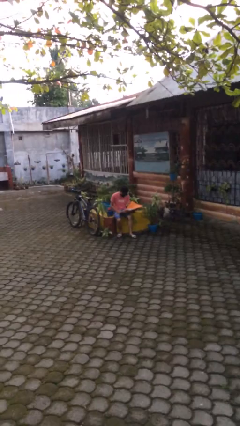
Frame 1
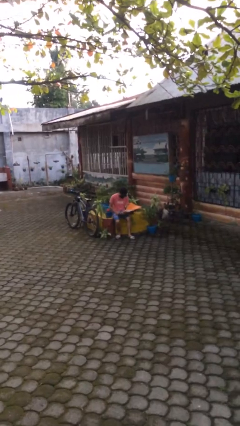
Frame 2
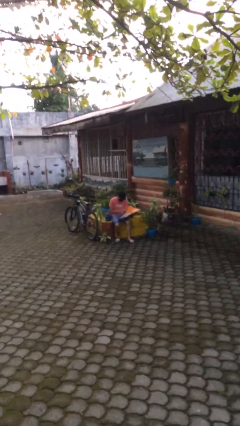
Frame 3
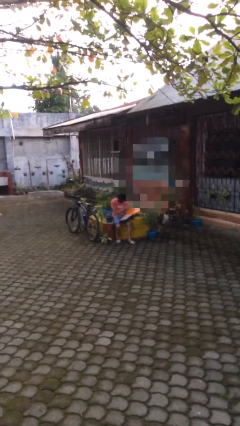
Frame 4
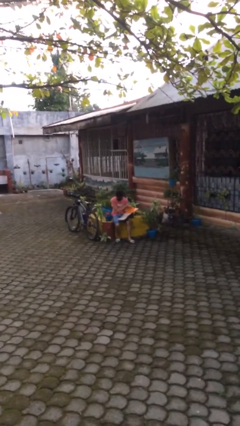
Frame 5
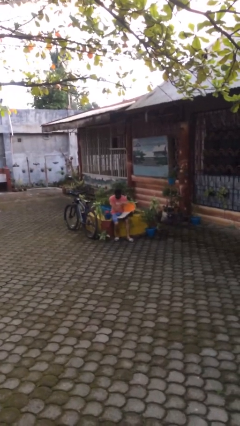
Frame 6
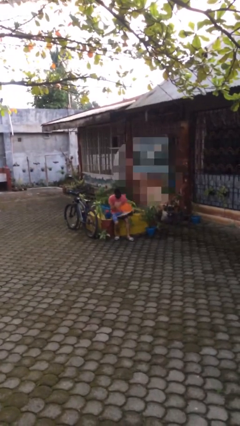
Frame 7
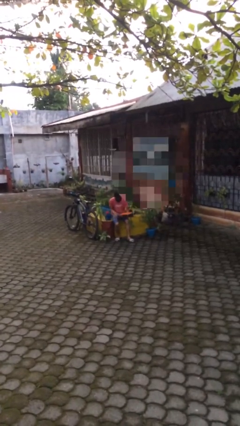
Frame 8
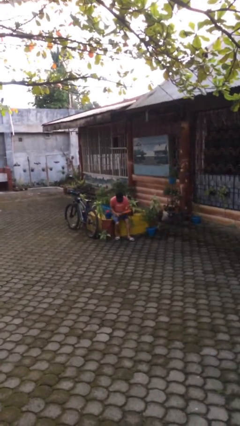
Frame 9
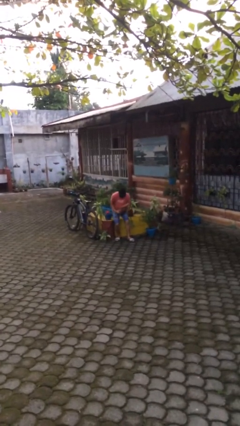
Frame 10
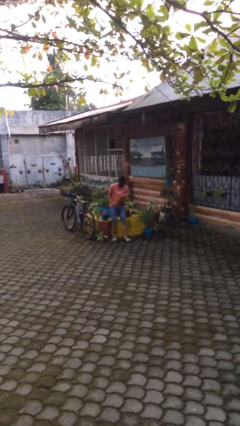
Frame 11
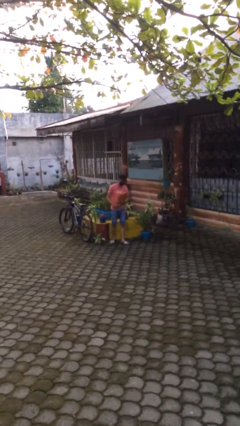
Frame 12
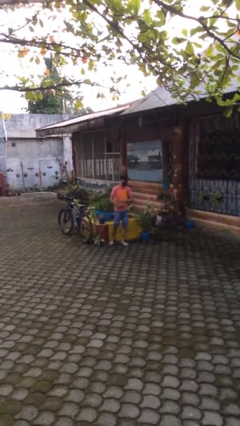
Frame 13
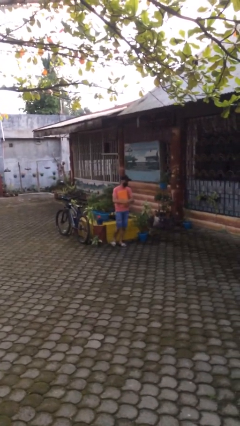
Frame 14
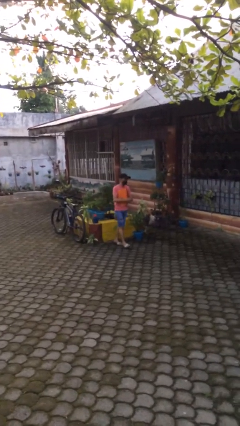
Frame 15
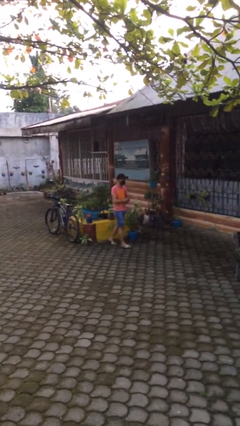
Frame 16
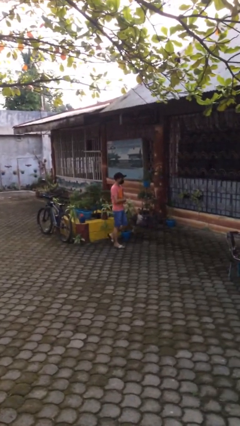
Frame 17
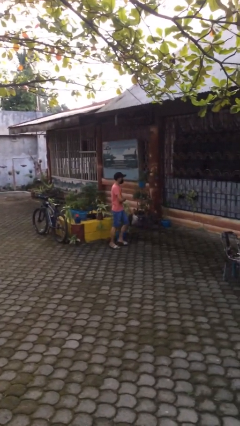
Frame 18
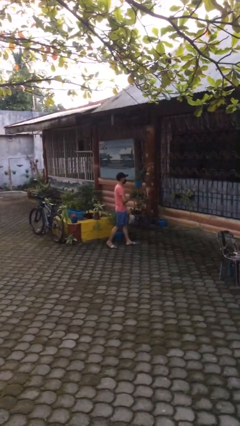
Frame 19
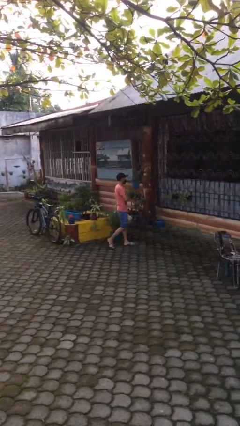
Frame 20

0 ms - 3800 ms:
person stands up

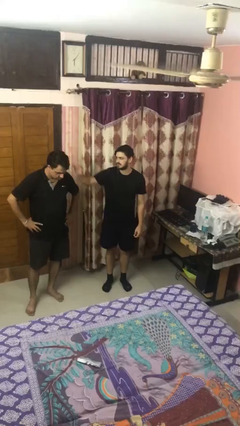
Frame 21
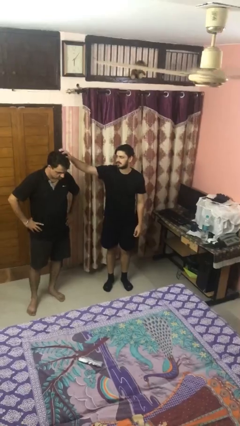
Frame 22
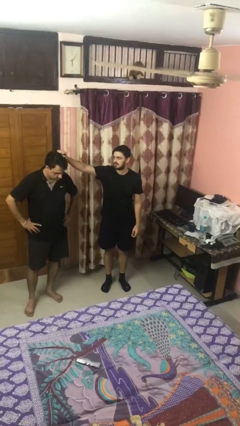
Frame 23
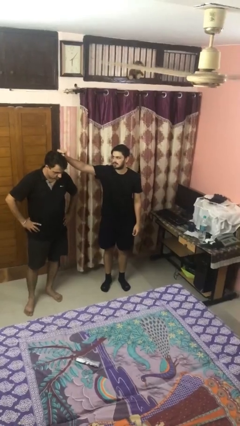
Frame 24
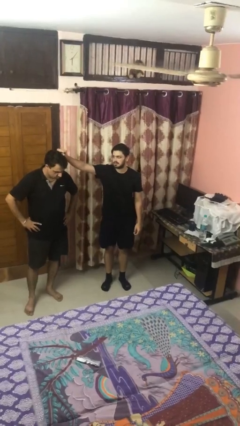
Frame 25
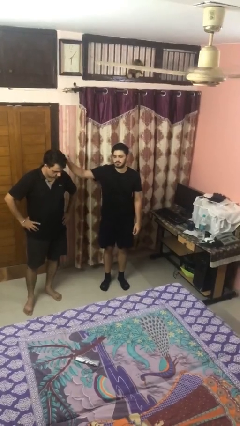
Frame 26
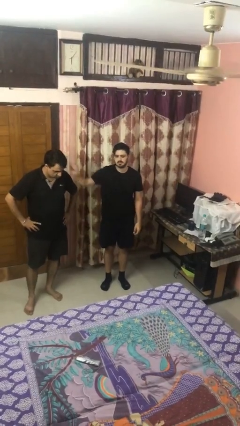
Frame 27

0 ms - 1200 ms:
person grabs person by hair

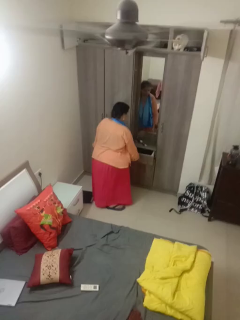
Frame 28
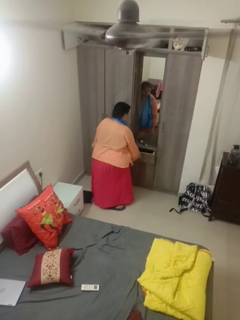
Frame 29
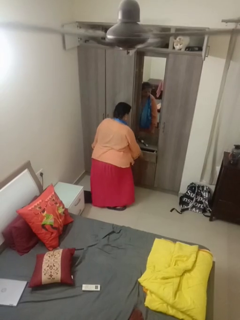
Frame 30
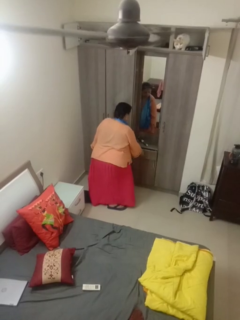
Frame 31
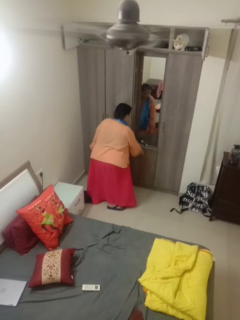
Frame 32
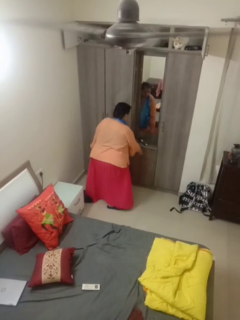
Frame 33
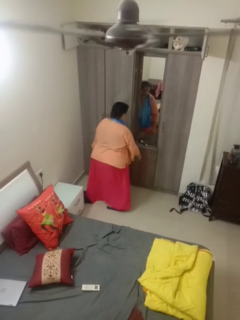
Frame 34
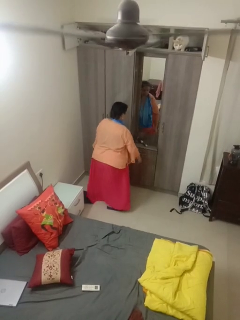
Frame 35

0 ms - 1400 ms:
person closes dresser drawer

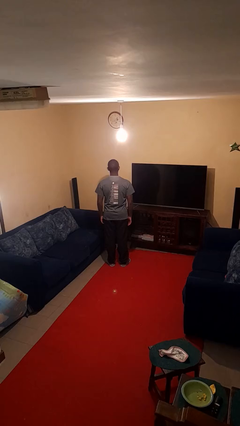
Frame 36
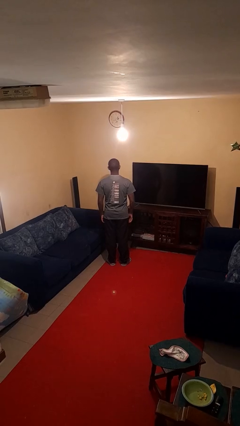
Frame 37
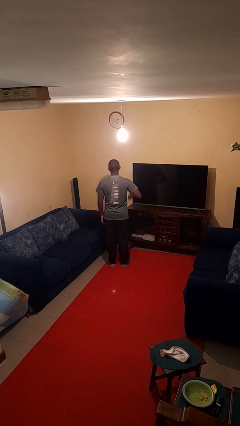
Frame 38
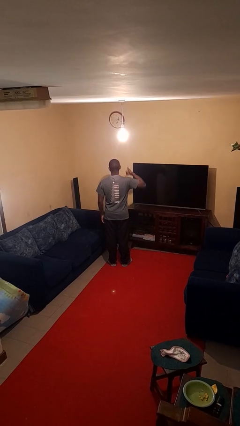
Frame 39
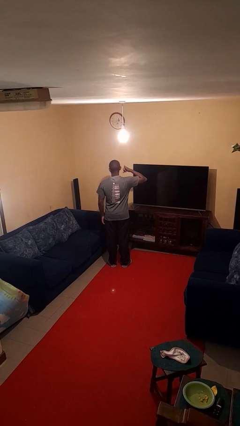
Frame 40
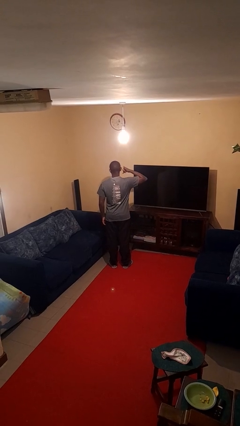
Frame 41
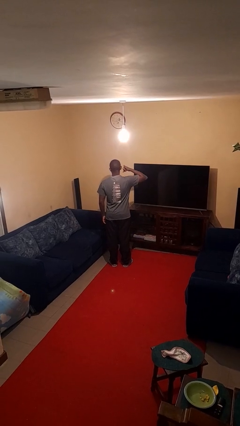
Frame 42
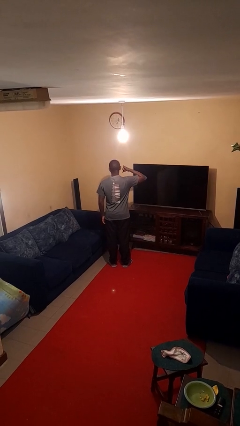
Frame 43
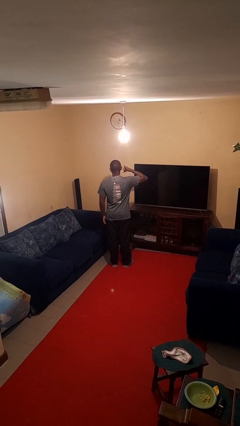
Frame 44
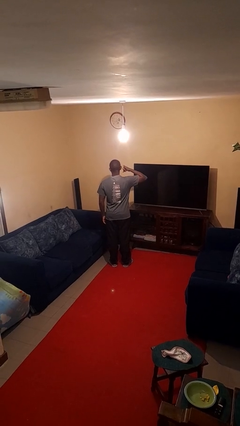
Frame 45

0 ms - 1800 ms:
person gestures call me

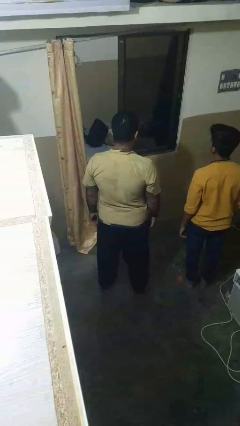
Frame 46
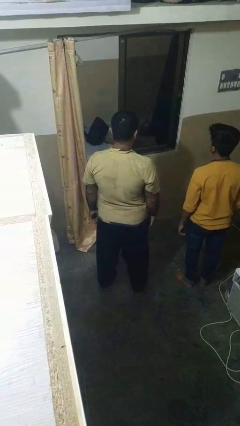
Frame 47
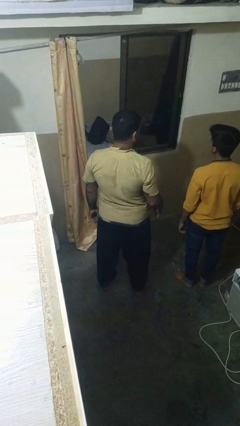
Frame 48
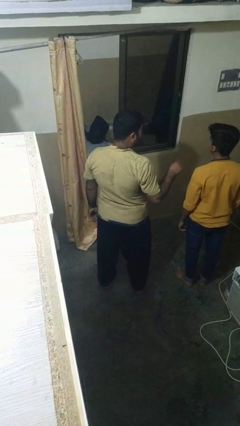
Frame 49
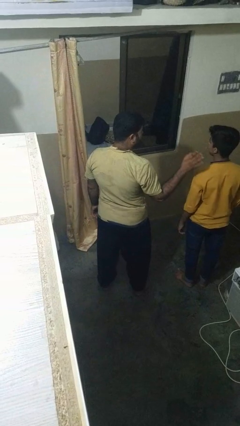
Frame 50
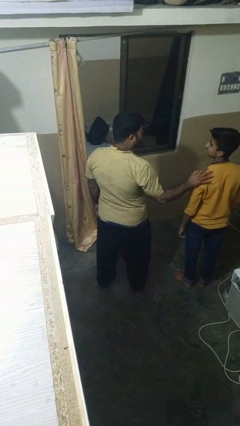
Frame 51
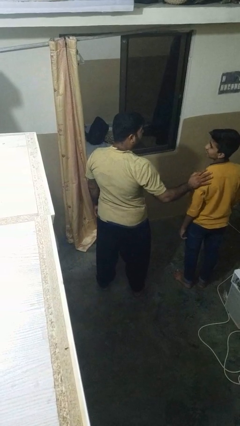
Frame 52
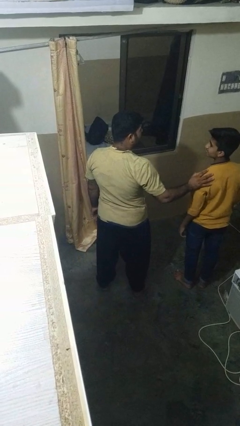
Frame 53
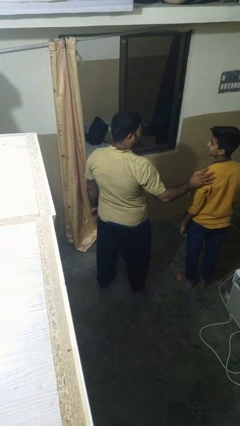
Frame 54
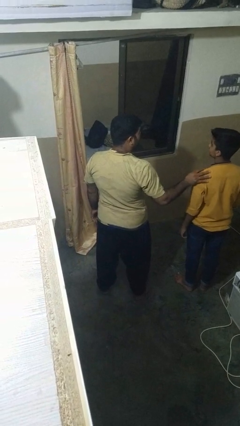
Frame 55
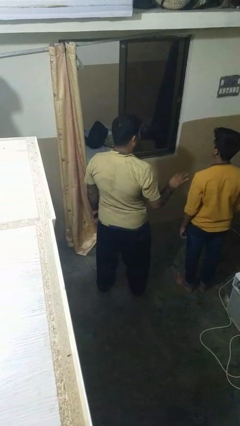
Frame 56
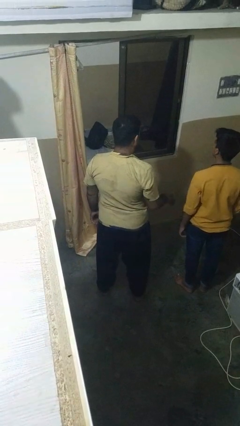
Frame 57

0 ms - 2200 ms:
person pounds shoulders of person

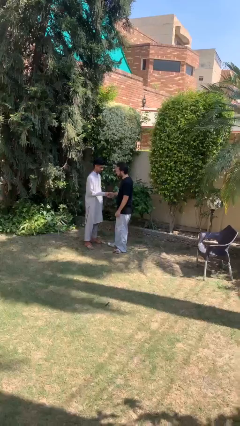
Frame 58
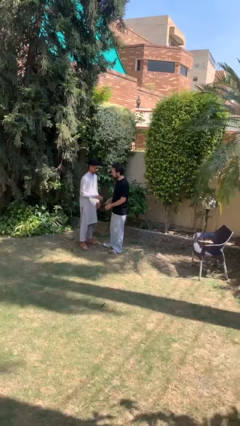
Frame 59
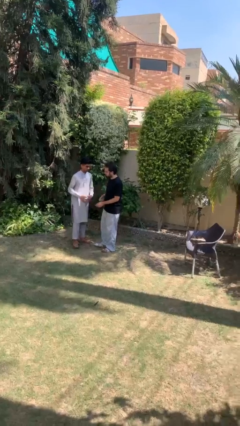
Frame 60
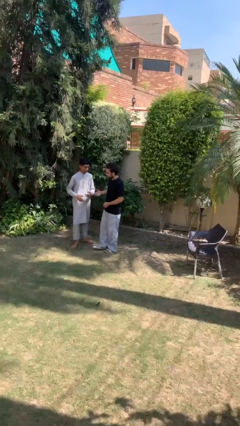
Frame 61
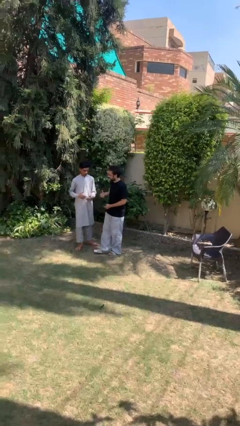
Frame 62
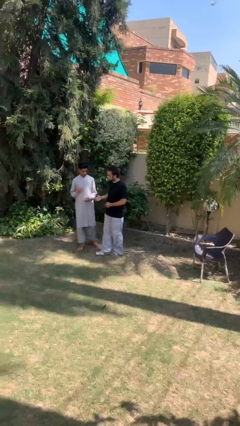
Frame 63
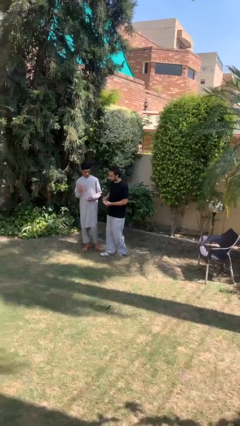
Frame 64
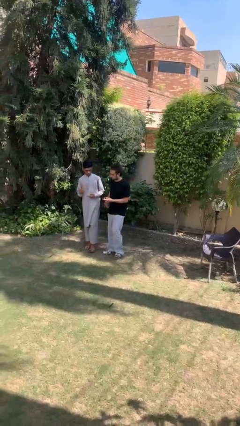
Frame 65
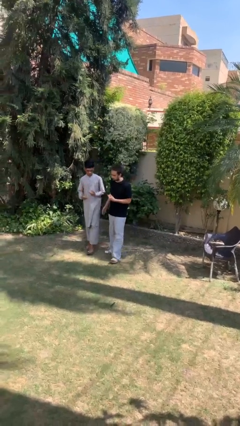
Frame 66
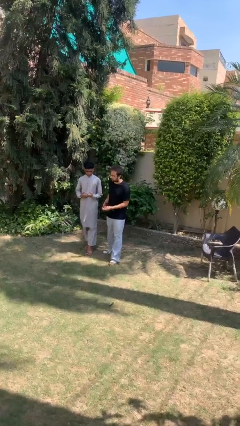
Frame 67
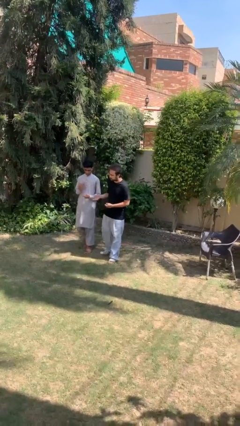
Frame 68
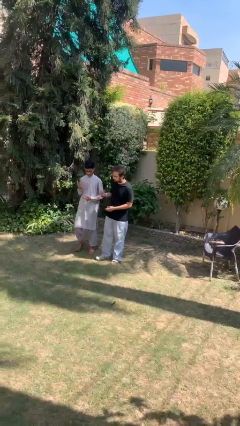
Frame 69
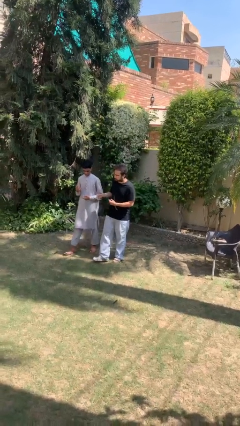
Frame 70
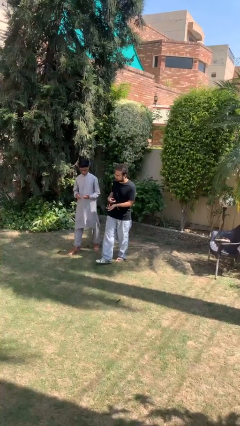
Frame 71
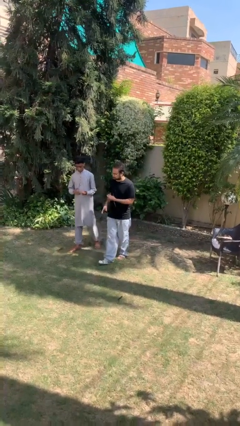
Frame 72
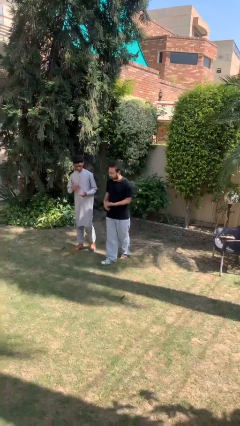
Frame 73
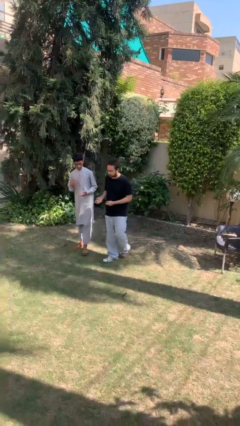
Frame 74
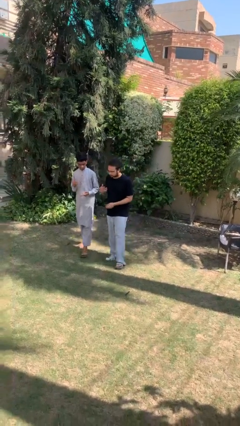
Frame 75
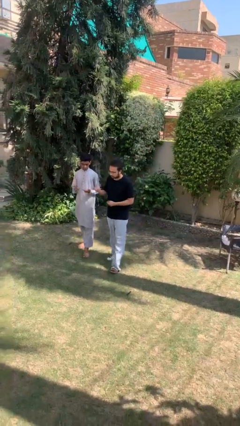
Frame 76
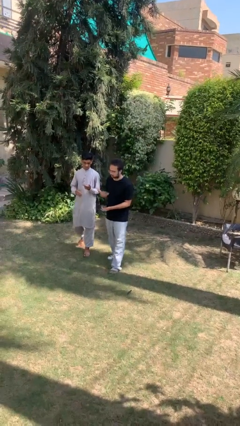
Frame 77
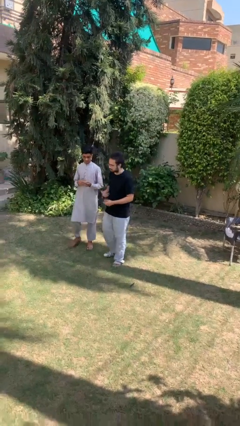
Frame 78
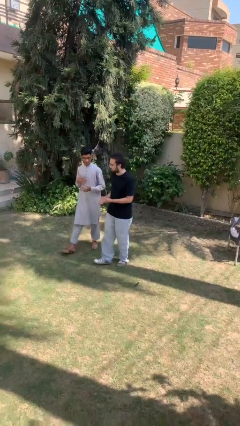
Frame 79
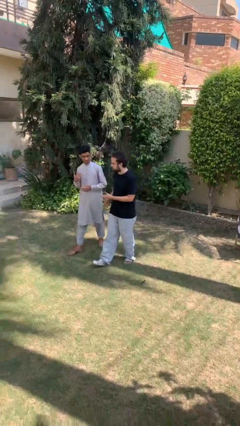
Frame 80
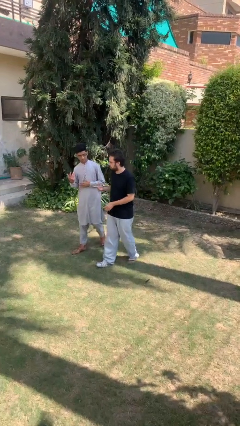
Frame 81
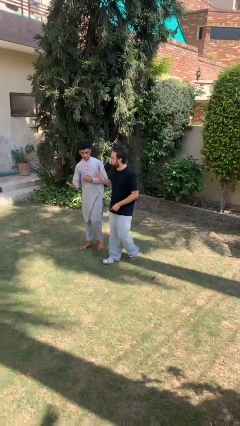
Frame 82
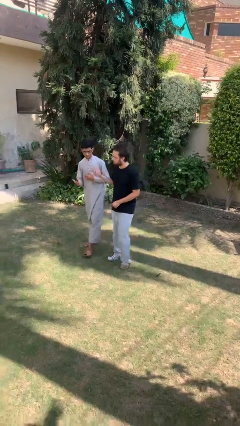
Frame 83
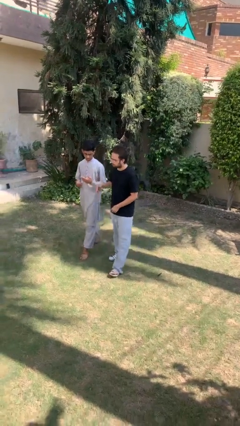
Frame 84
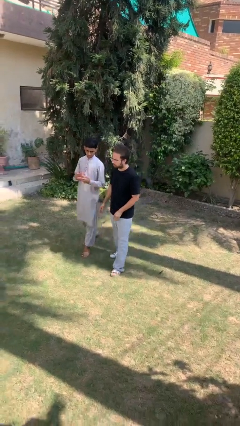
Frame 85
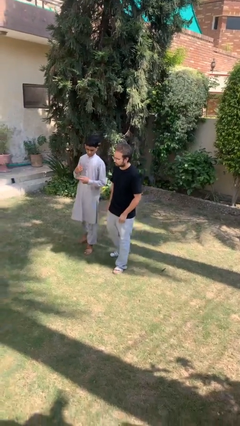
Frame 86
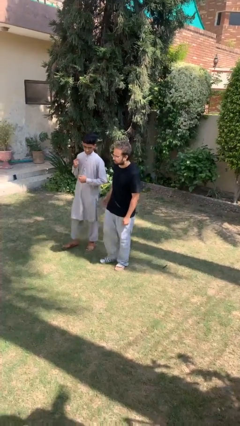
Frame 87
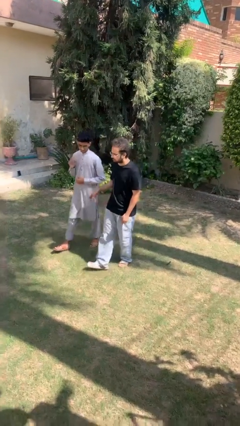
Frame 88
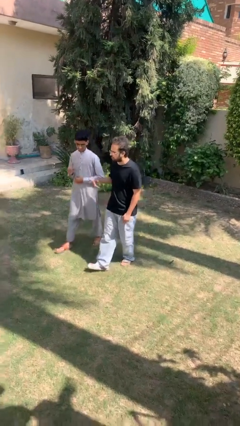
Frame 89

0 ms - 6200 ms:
person talks to person

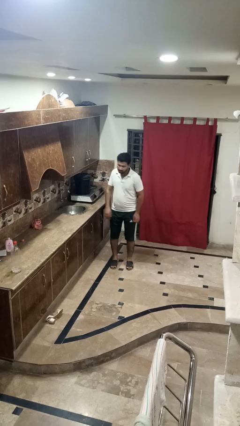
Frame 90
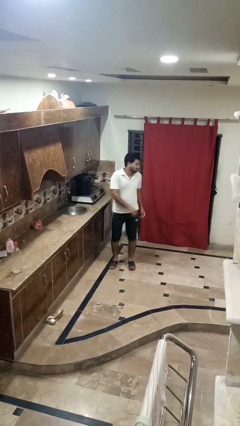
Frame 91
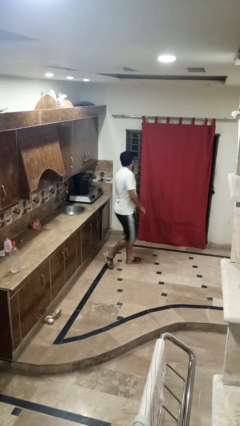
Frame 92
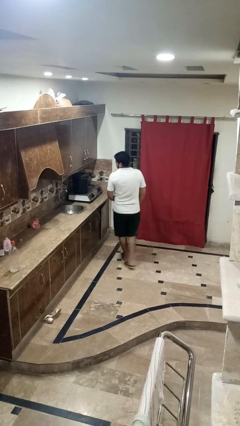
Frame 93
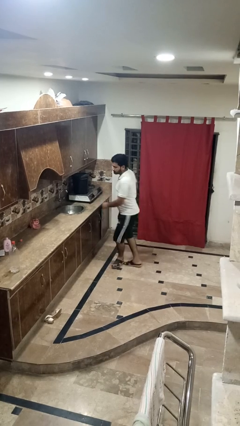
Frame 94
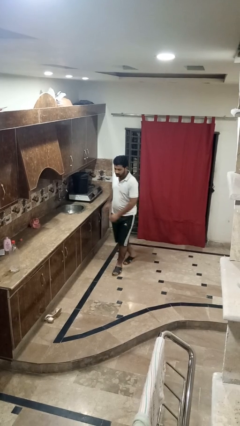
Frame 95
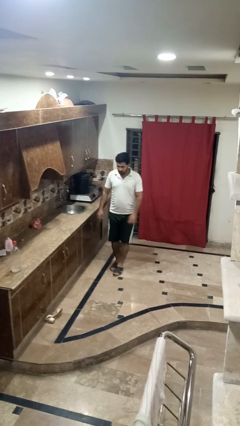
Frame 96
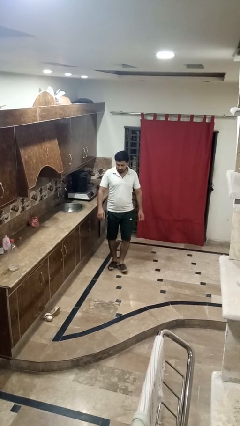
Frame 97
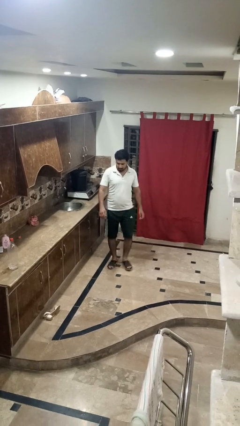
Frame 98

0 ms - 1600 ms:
person twirls
